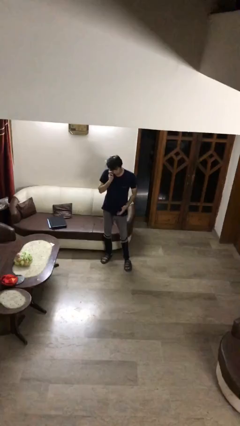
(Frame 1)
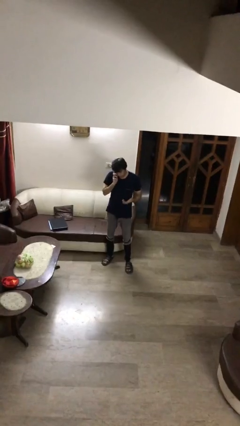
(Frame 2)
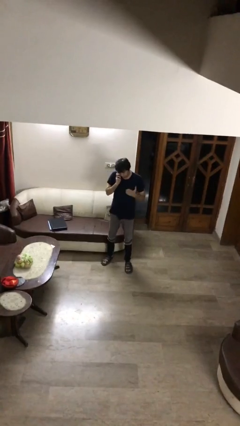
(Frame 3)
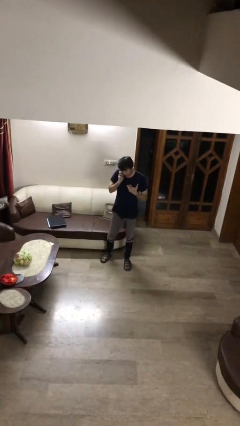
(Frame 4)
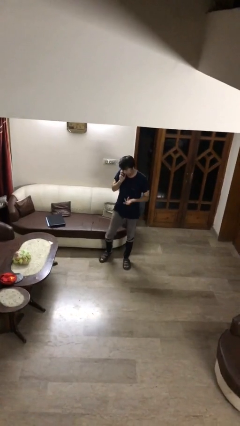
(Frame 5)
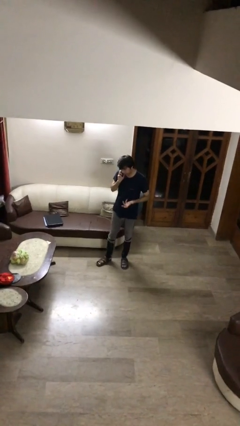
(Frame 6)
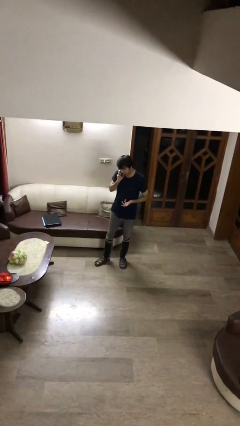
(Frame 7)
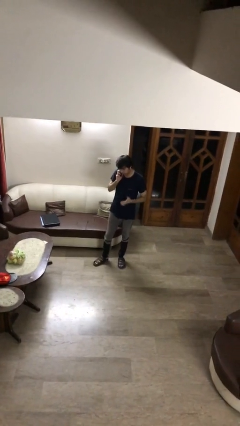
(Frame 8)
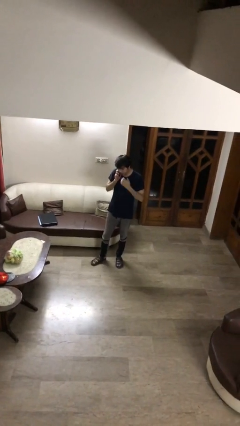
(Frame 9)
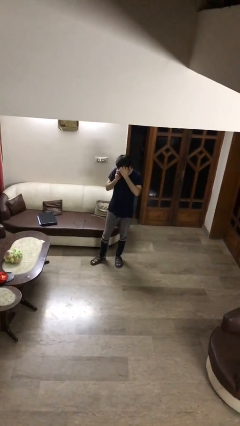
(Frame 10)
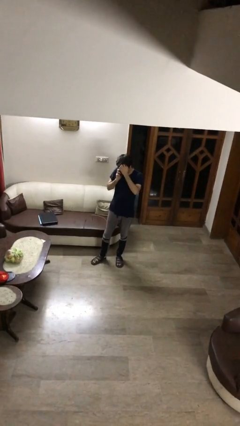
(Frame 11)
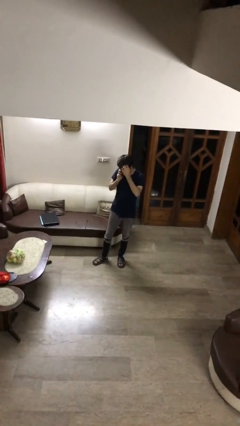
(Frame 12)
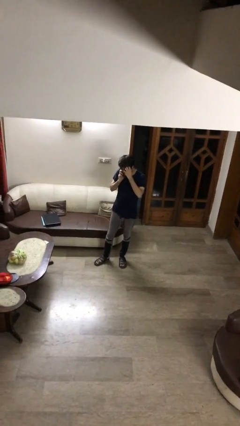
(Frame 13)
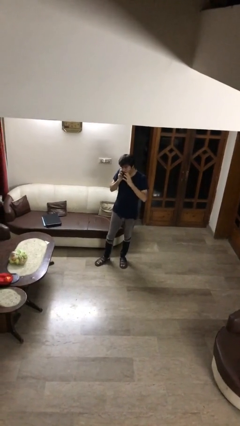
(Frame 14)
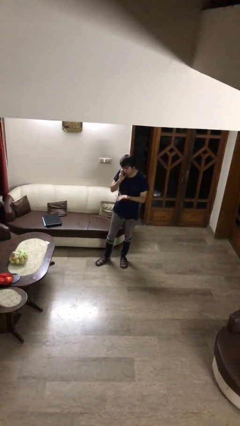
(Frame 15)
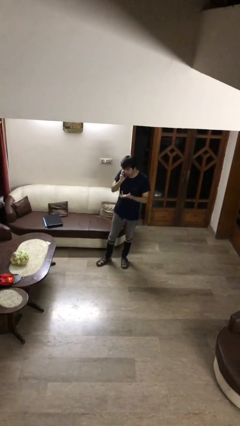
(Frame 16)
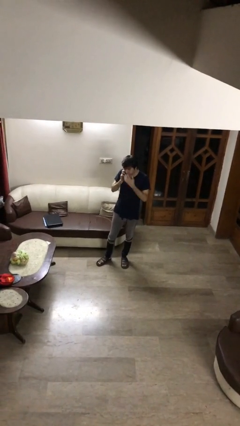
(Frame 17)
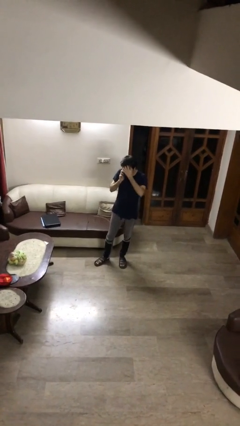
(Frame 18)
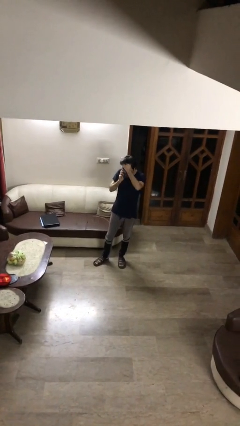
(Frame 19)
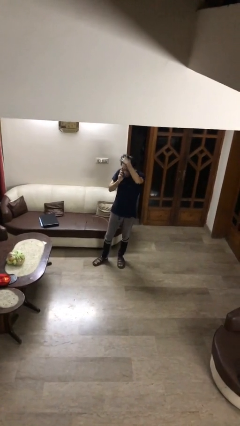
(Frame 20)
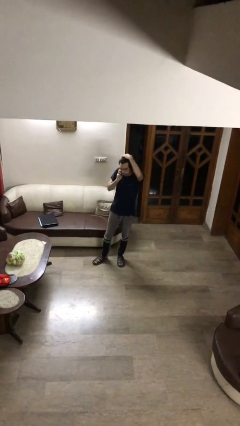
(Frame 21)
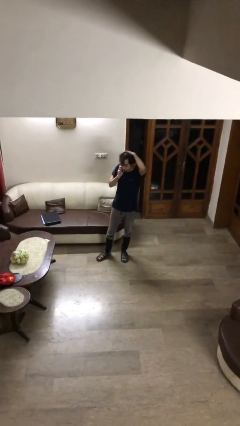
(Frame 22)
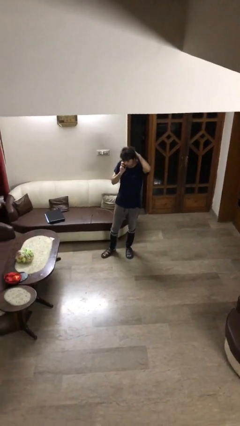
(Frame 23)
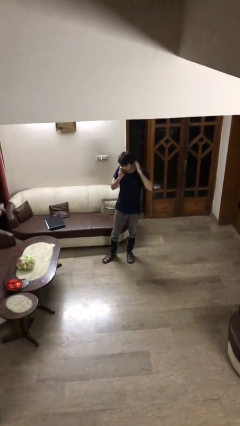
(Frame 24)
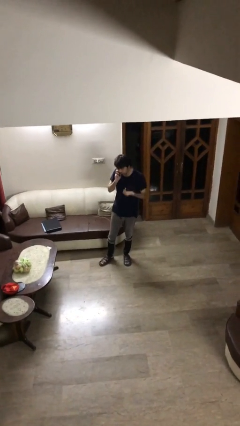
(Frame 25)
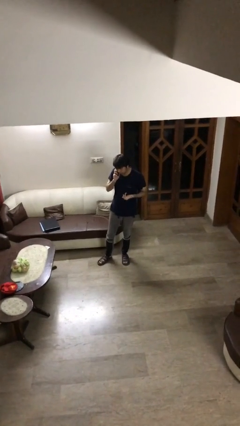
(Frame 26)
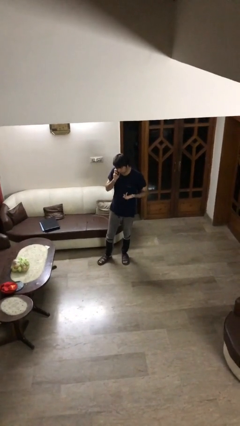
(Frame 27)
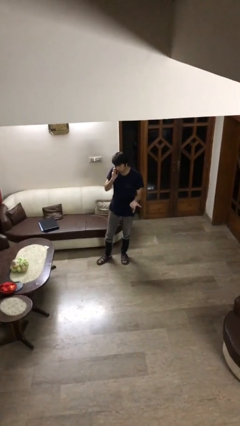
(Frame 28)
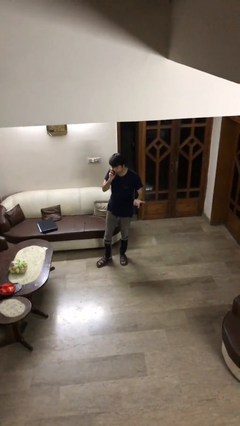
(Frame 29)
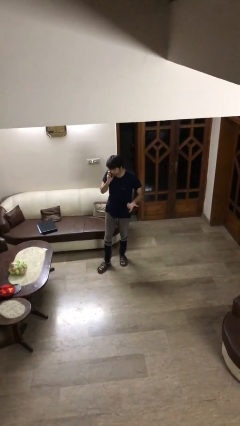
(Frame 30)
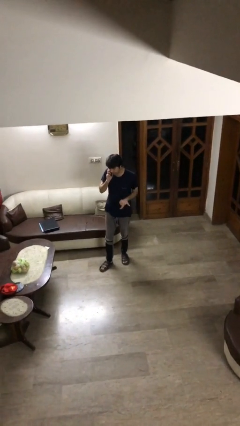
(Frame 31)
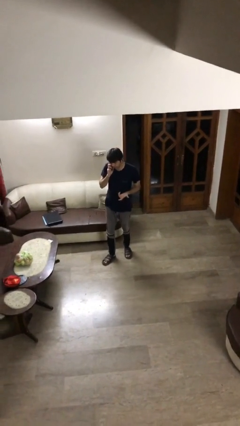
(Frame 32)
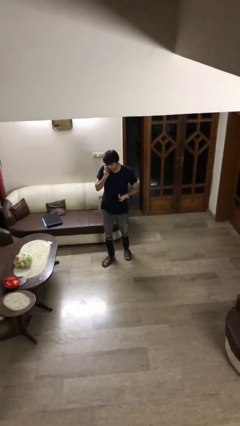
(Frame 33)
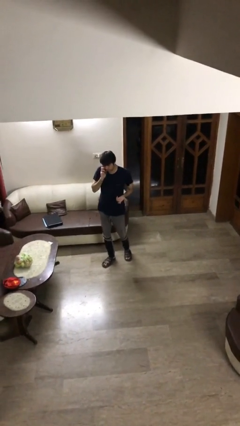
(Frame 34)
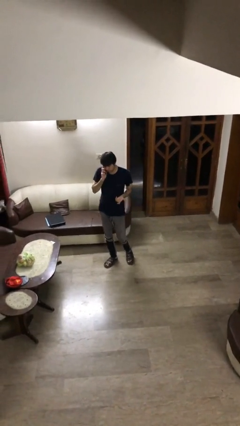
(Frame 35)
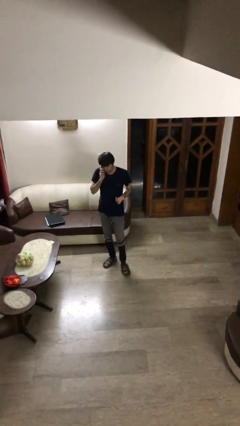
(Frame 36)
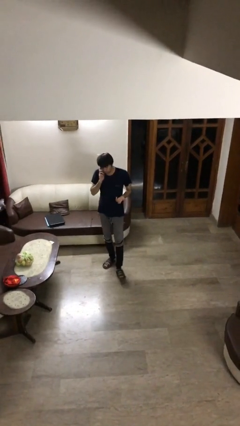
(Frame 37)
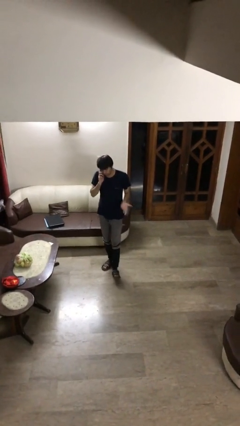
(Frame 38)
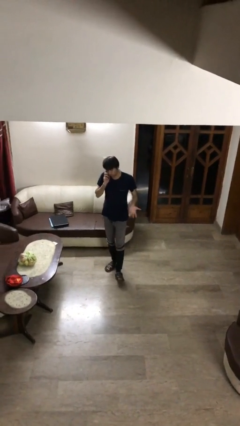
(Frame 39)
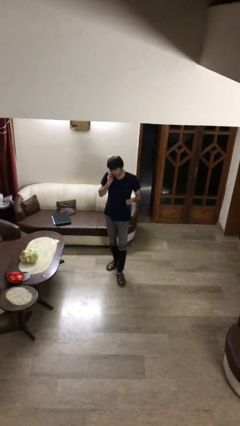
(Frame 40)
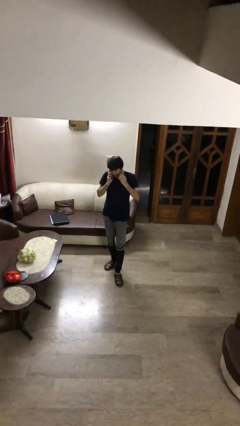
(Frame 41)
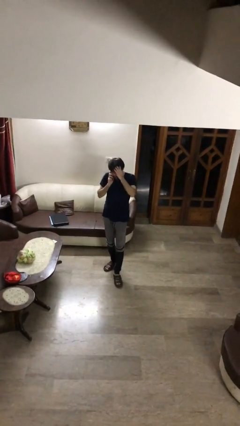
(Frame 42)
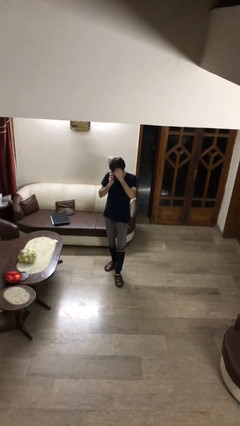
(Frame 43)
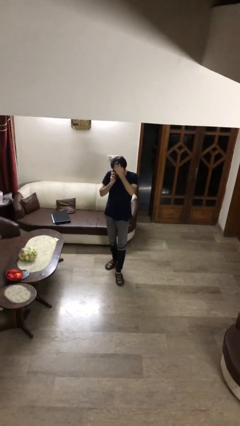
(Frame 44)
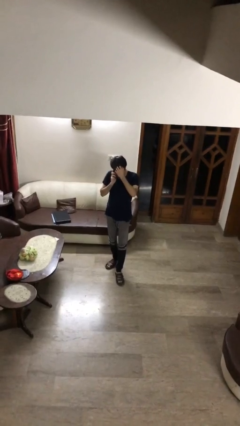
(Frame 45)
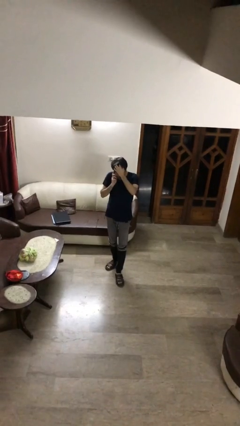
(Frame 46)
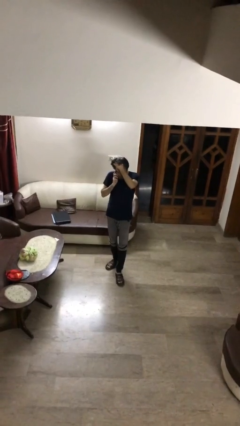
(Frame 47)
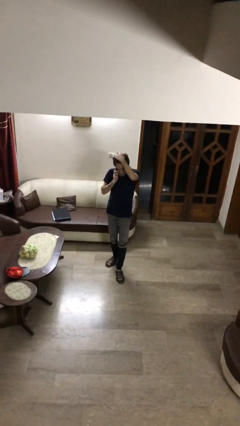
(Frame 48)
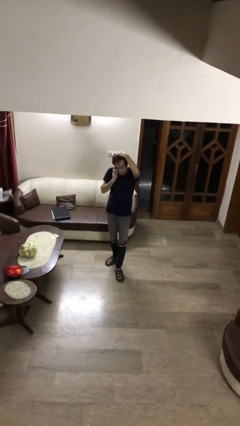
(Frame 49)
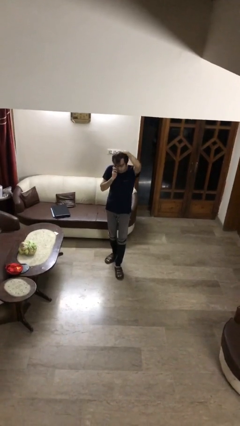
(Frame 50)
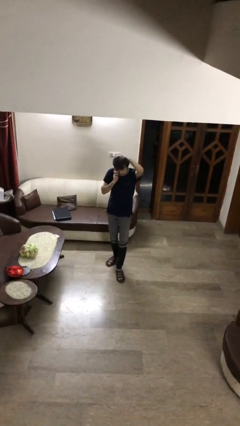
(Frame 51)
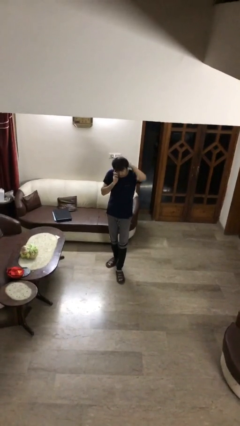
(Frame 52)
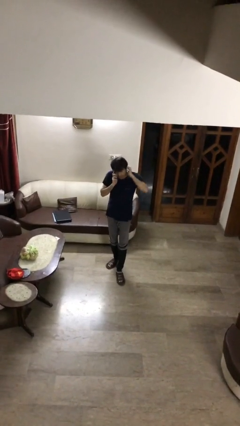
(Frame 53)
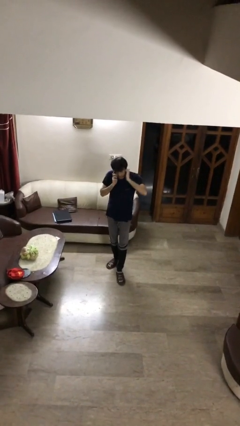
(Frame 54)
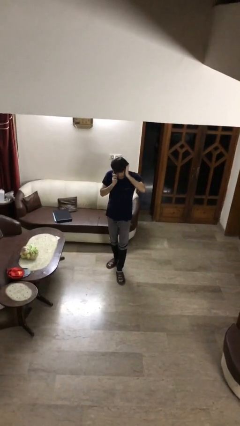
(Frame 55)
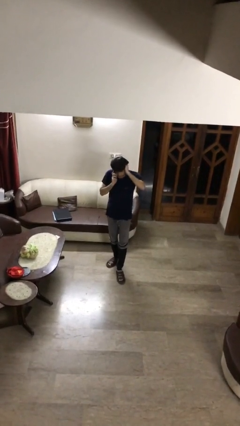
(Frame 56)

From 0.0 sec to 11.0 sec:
person talks on phone

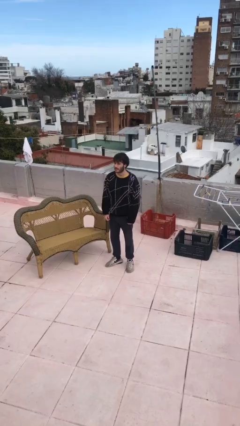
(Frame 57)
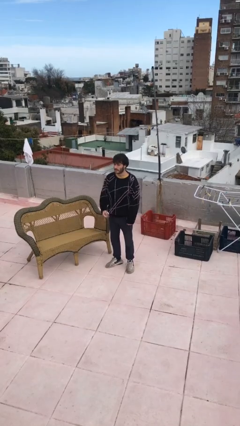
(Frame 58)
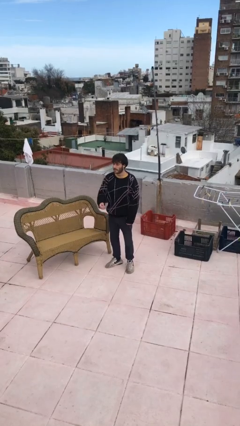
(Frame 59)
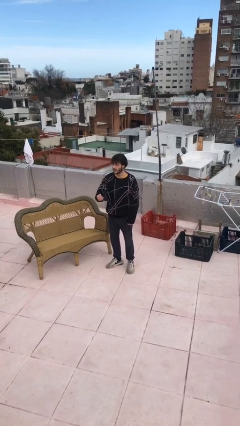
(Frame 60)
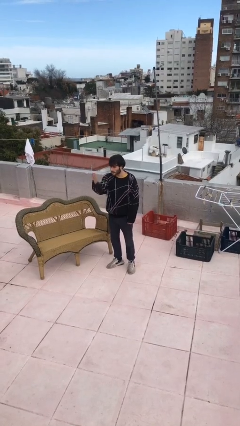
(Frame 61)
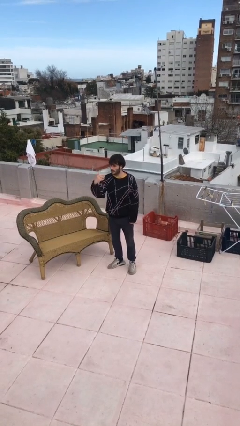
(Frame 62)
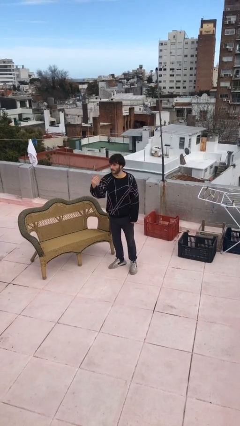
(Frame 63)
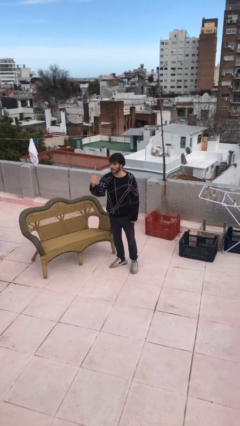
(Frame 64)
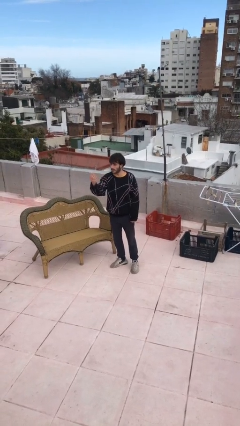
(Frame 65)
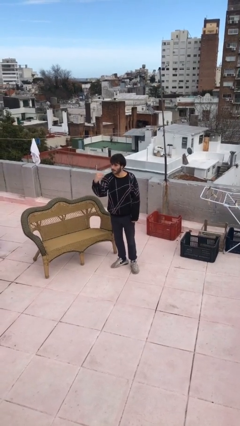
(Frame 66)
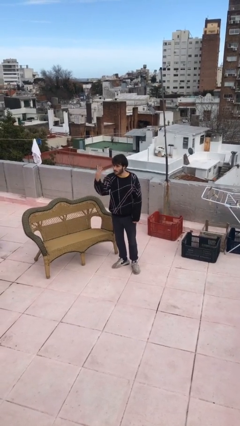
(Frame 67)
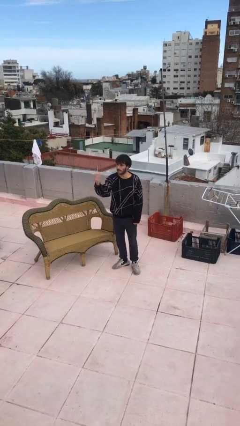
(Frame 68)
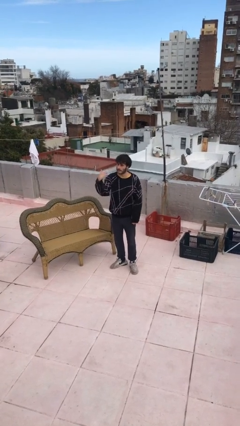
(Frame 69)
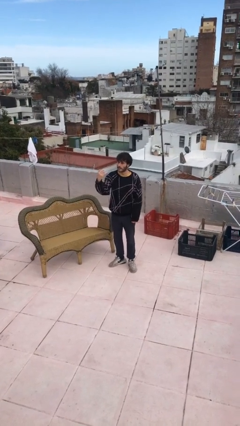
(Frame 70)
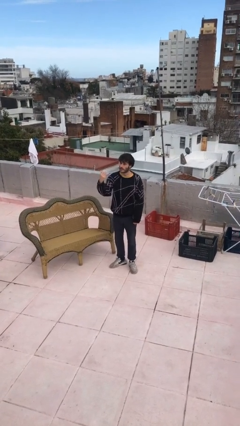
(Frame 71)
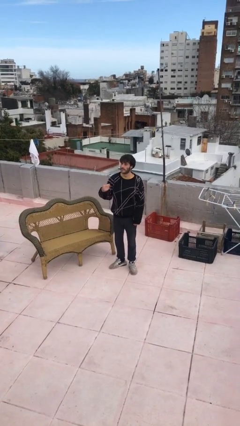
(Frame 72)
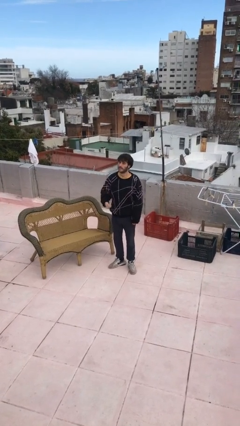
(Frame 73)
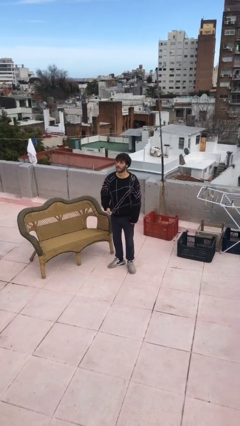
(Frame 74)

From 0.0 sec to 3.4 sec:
person gestures come here

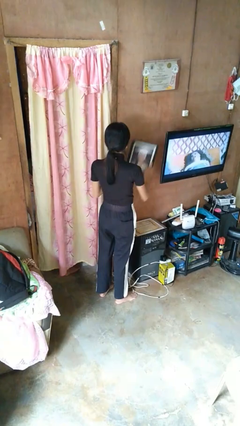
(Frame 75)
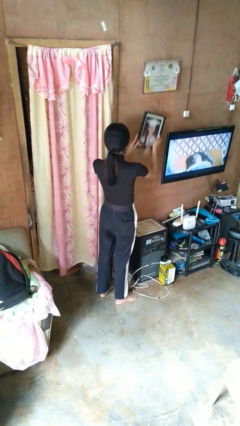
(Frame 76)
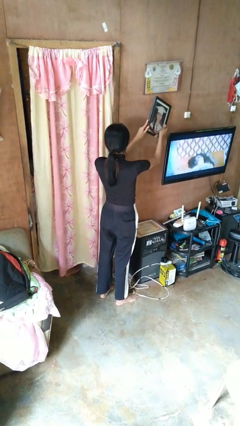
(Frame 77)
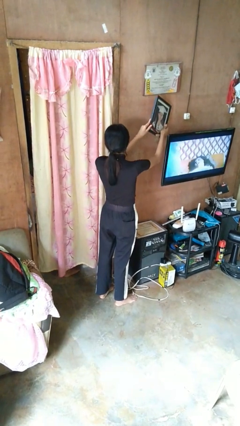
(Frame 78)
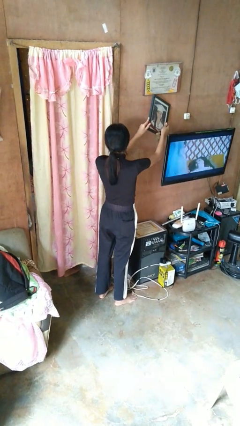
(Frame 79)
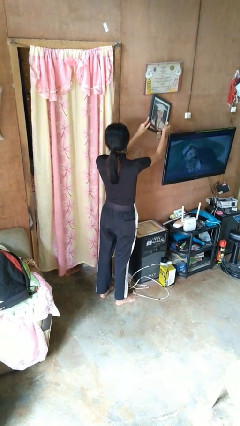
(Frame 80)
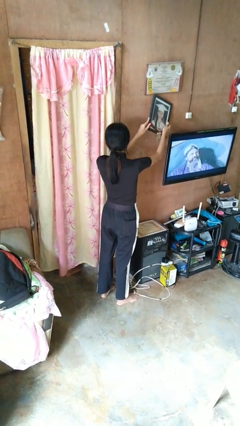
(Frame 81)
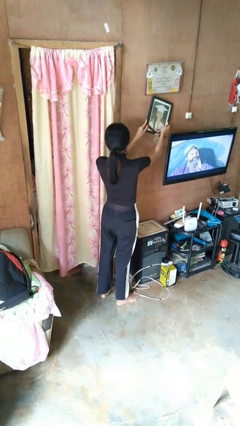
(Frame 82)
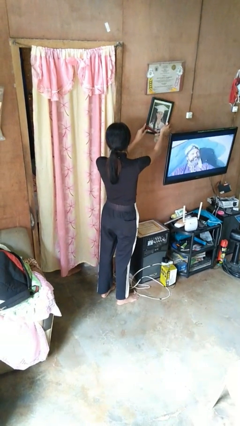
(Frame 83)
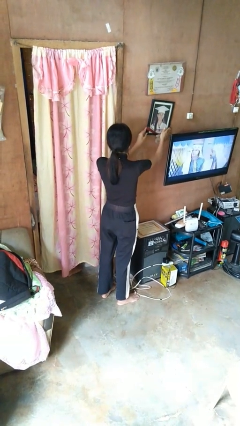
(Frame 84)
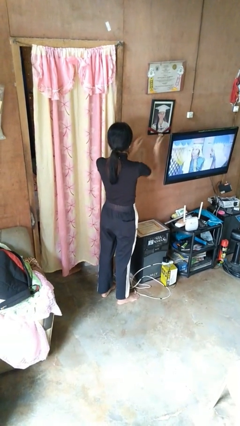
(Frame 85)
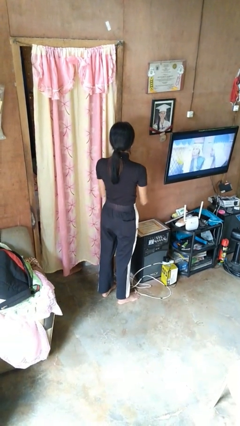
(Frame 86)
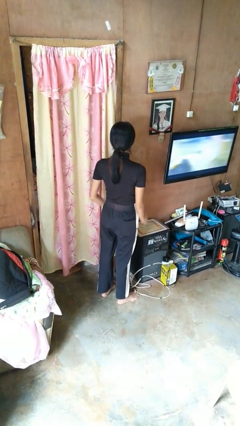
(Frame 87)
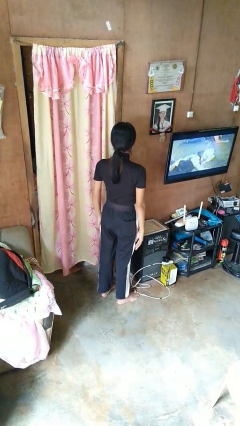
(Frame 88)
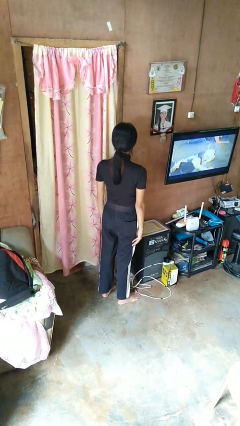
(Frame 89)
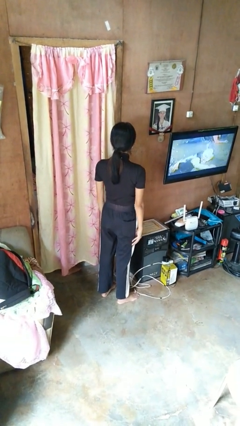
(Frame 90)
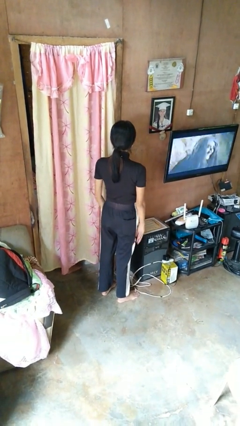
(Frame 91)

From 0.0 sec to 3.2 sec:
person puts up picture frame

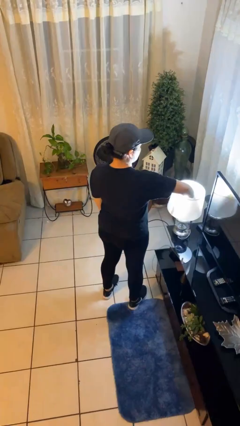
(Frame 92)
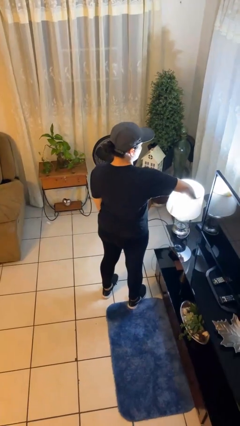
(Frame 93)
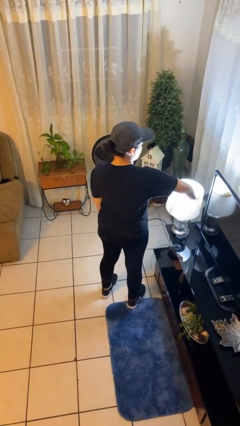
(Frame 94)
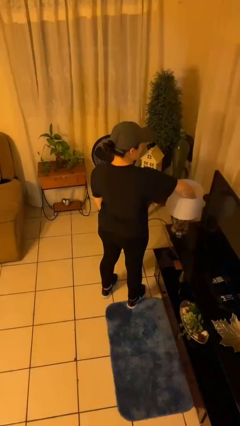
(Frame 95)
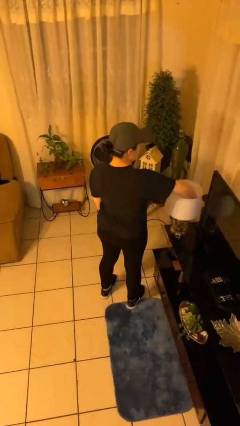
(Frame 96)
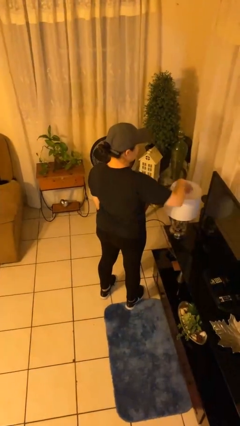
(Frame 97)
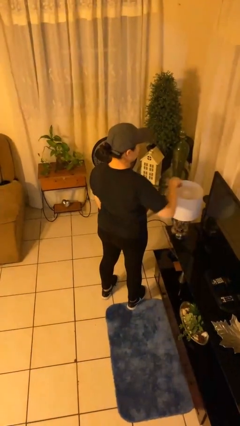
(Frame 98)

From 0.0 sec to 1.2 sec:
person turns off lamp
